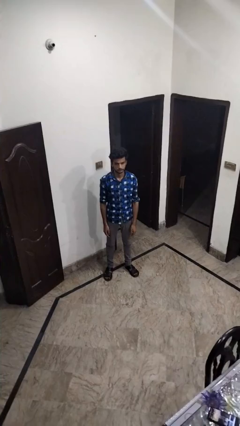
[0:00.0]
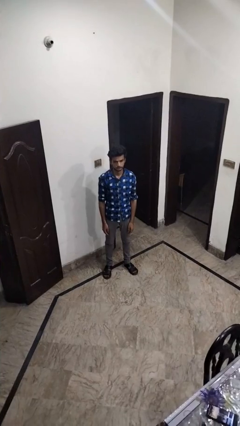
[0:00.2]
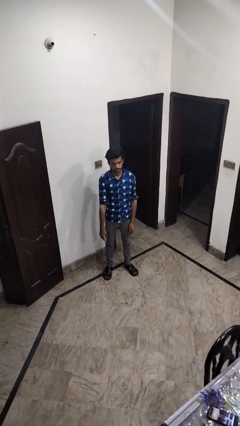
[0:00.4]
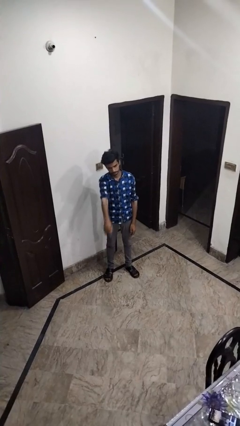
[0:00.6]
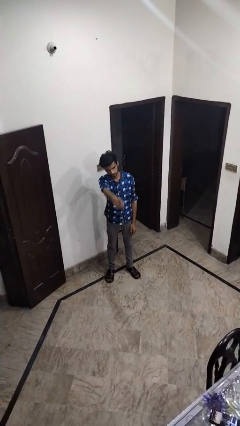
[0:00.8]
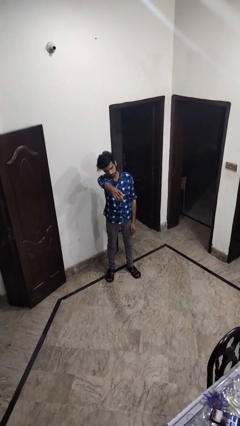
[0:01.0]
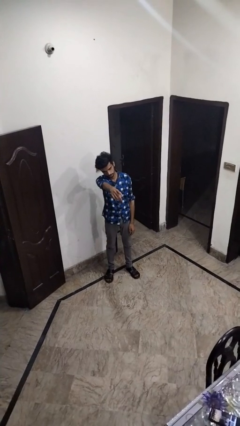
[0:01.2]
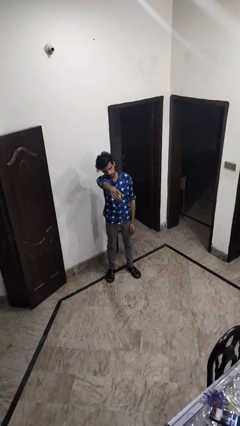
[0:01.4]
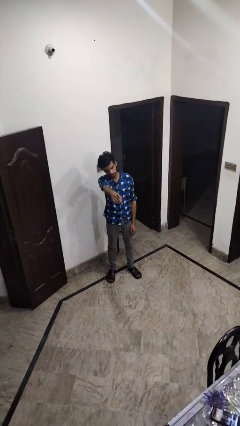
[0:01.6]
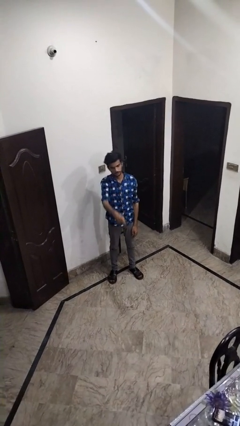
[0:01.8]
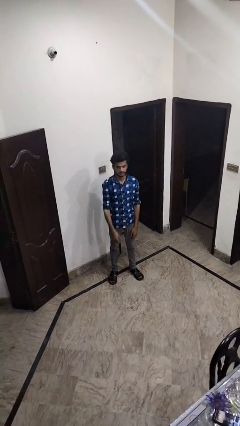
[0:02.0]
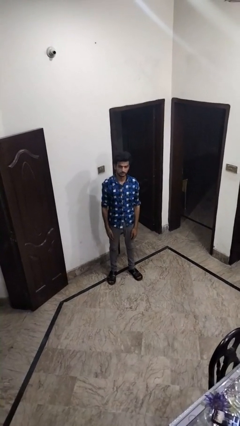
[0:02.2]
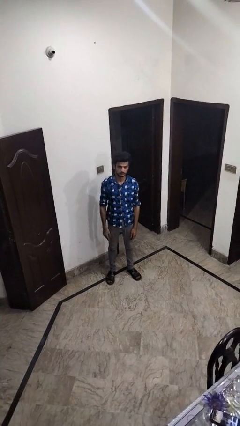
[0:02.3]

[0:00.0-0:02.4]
person points at person

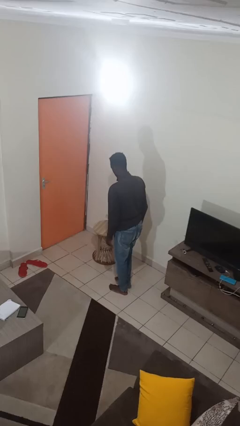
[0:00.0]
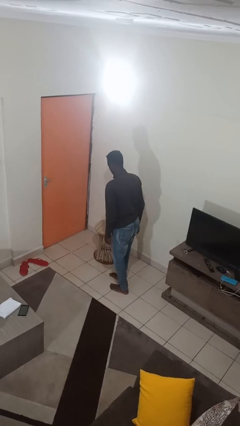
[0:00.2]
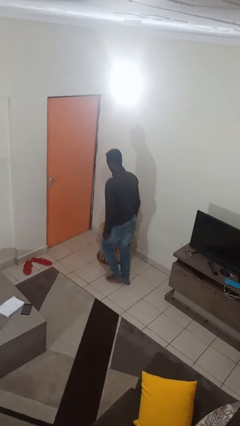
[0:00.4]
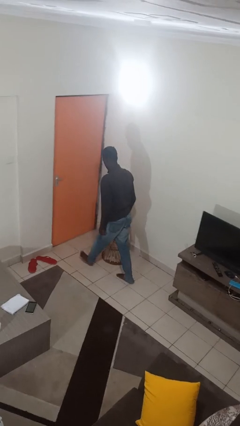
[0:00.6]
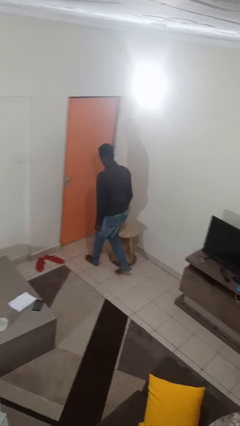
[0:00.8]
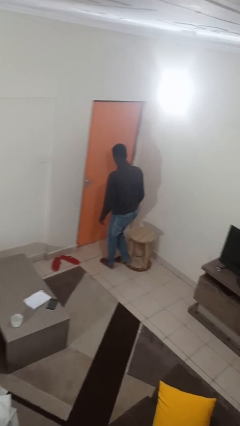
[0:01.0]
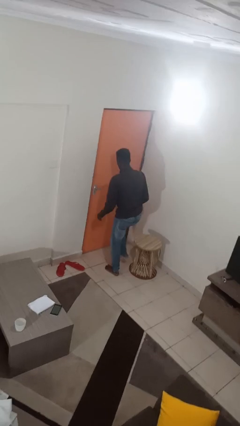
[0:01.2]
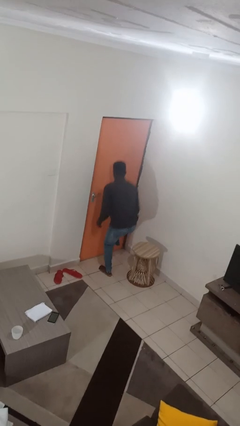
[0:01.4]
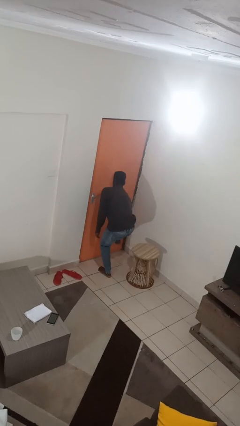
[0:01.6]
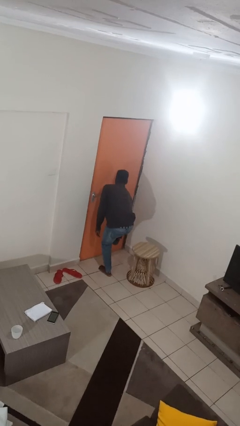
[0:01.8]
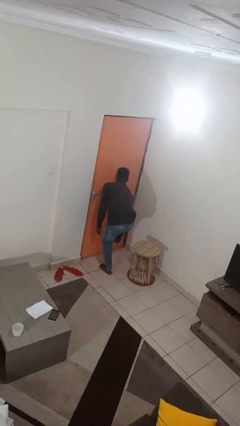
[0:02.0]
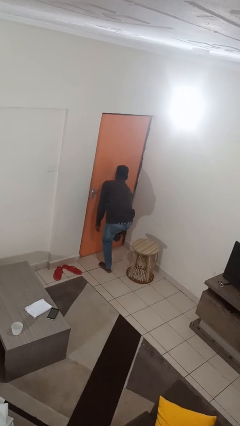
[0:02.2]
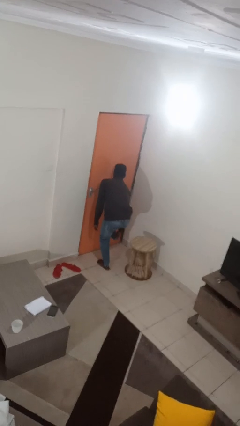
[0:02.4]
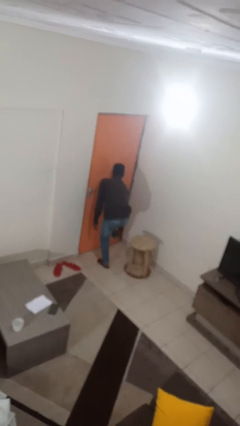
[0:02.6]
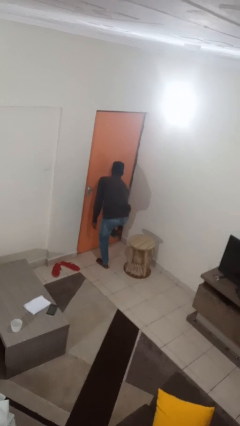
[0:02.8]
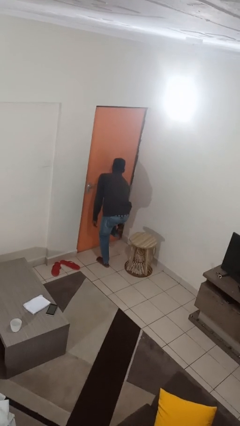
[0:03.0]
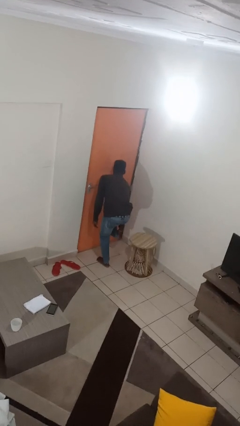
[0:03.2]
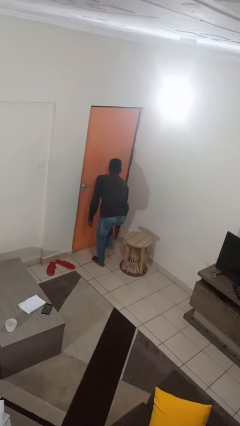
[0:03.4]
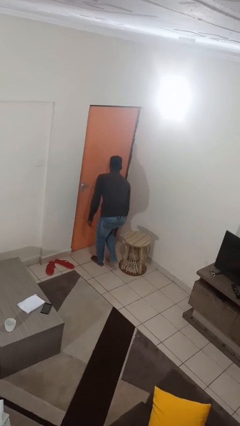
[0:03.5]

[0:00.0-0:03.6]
person stubs toe

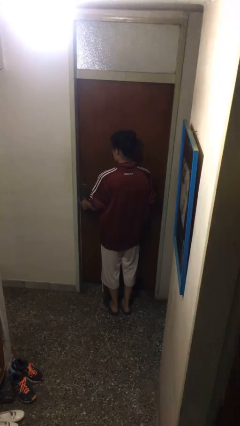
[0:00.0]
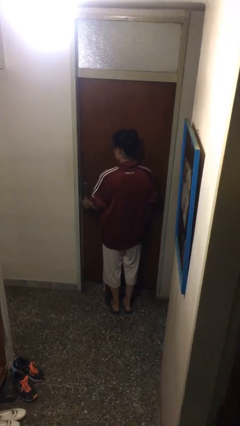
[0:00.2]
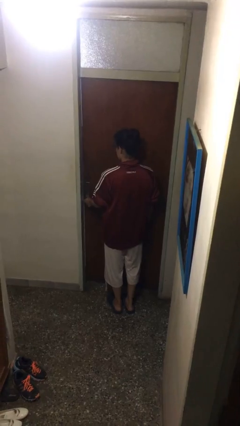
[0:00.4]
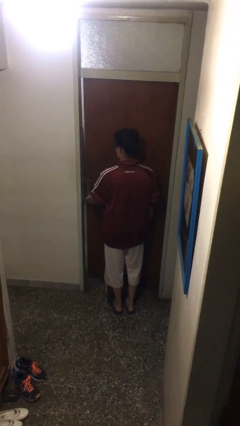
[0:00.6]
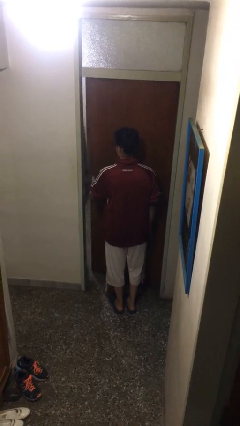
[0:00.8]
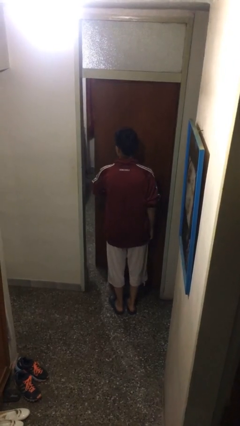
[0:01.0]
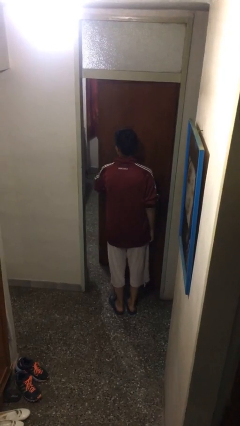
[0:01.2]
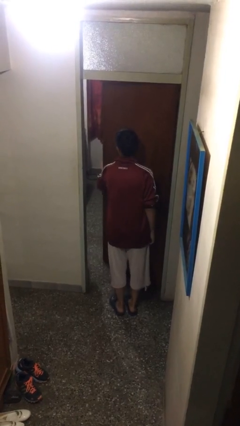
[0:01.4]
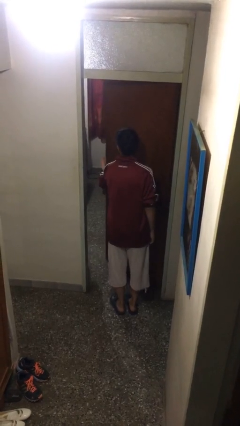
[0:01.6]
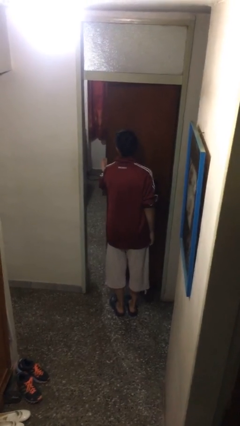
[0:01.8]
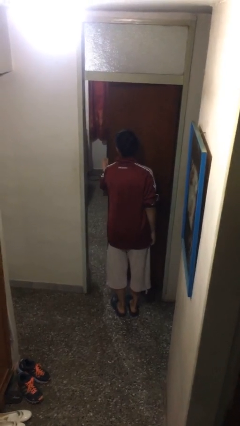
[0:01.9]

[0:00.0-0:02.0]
person opens facility door

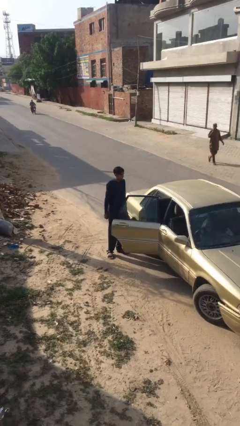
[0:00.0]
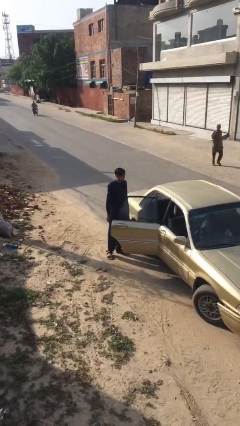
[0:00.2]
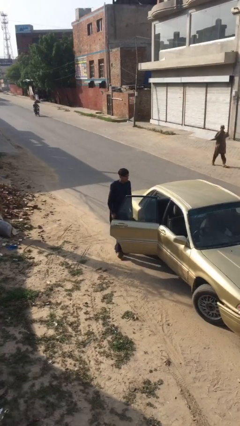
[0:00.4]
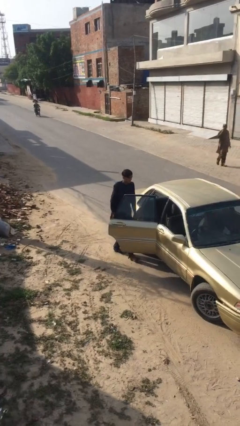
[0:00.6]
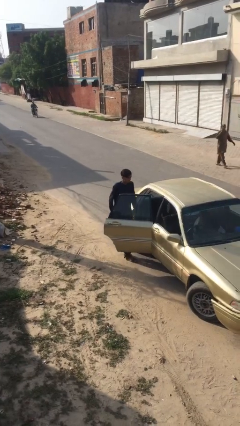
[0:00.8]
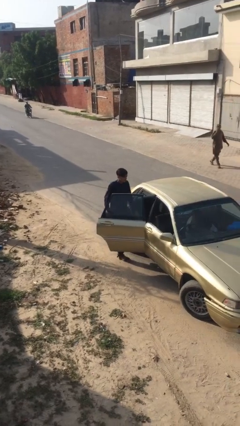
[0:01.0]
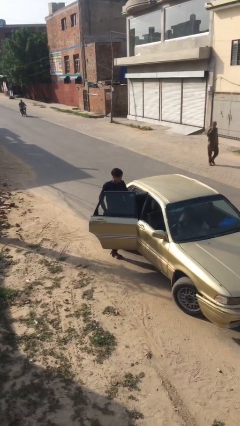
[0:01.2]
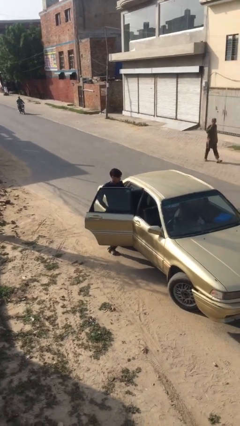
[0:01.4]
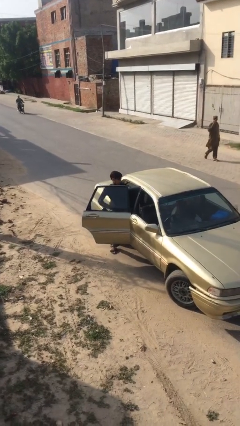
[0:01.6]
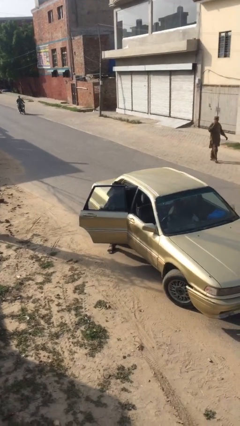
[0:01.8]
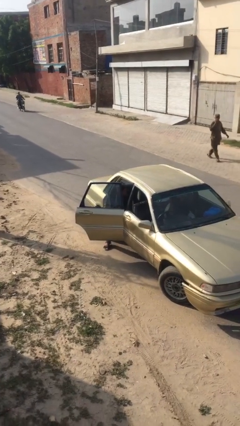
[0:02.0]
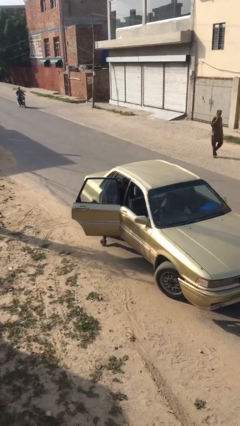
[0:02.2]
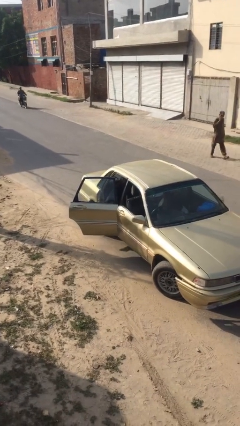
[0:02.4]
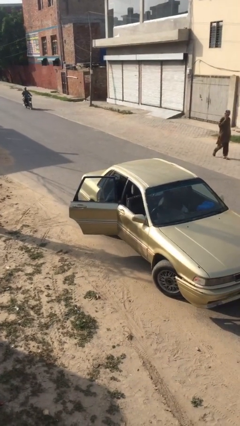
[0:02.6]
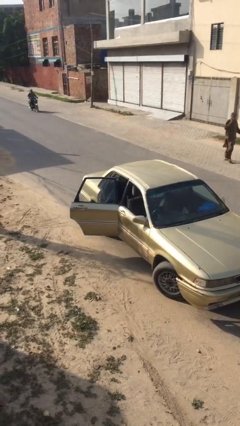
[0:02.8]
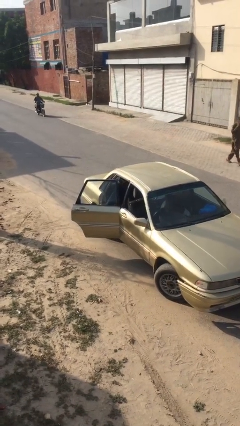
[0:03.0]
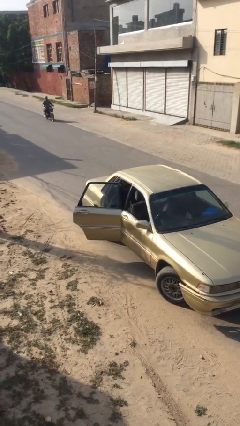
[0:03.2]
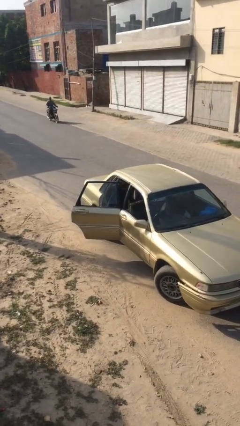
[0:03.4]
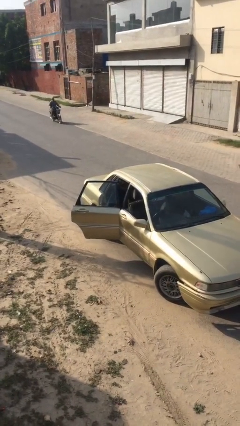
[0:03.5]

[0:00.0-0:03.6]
person enters car

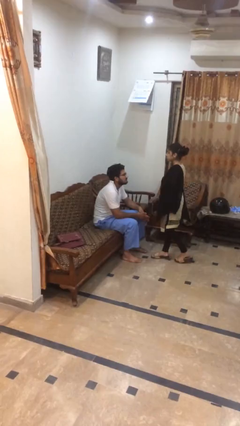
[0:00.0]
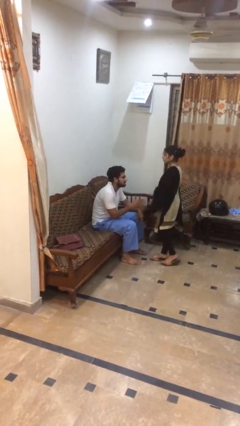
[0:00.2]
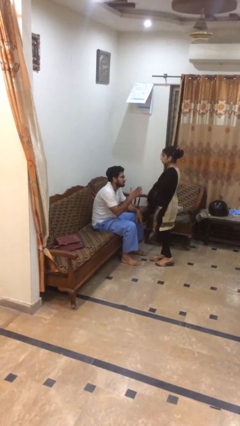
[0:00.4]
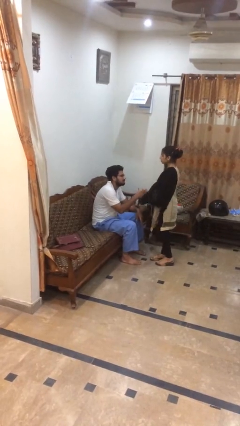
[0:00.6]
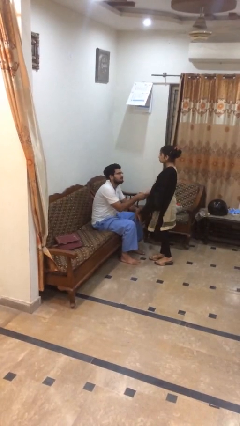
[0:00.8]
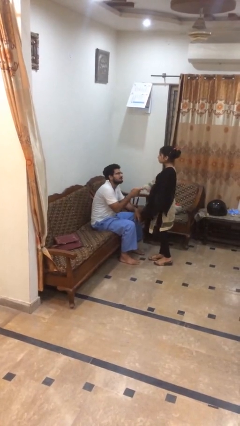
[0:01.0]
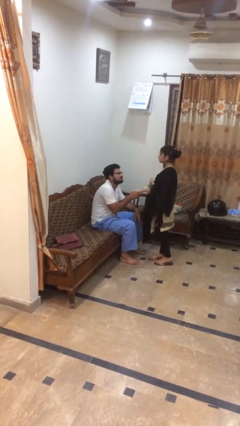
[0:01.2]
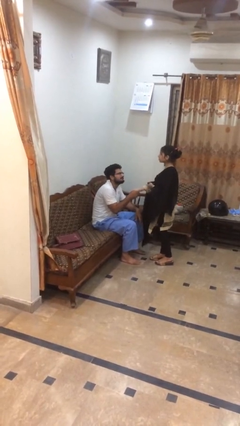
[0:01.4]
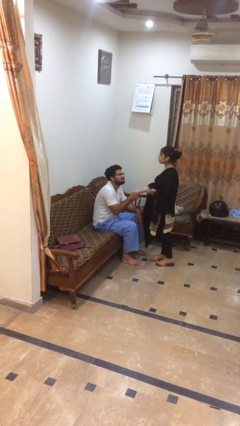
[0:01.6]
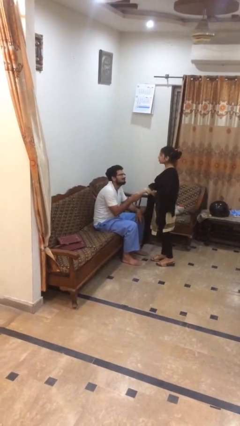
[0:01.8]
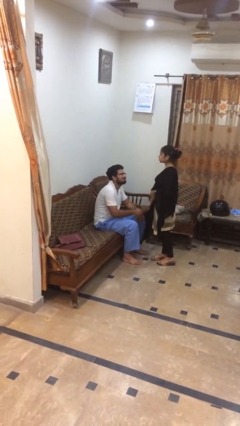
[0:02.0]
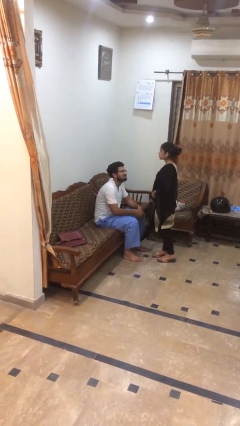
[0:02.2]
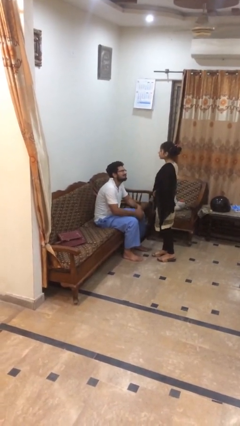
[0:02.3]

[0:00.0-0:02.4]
person shakes hand

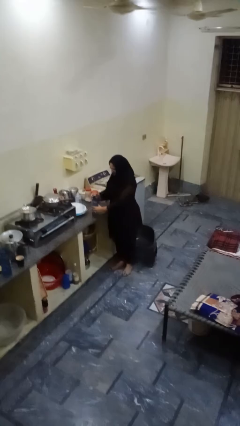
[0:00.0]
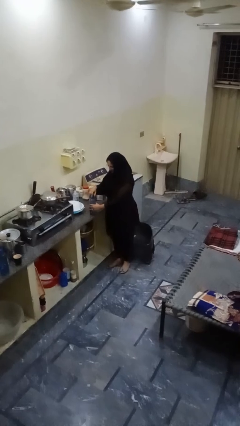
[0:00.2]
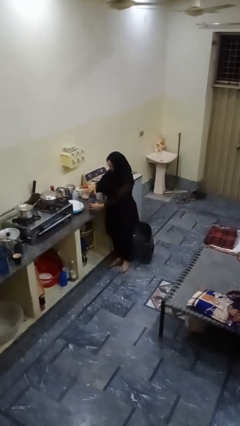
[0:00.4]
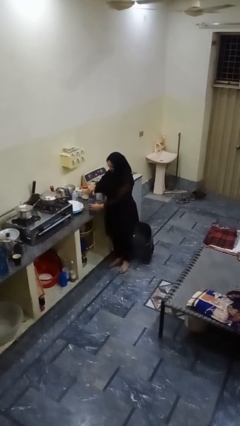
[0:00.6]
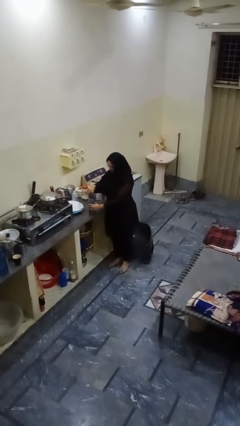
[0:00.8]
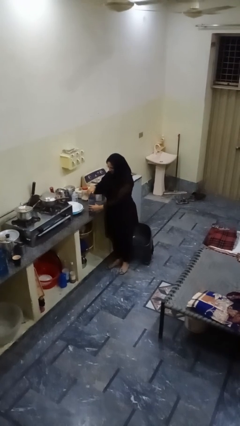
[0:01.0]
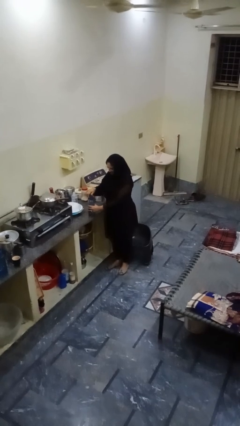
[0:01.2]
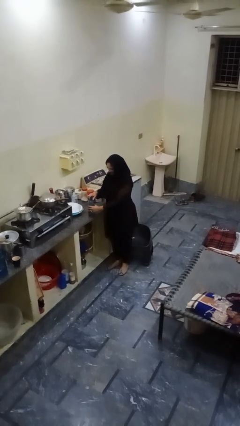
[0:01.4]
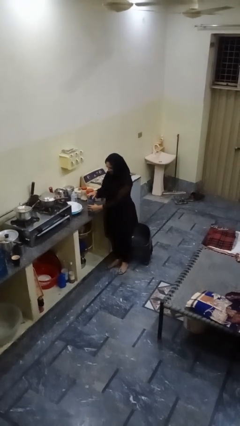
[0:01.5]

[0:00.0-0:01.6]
person screws lid to bottle
